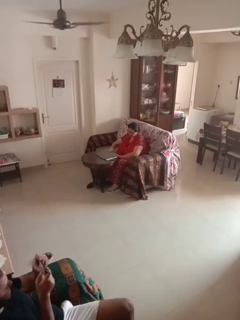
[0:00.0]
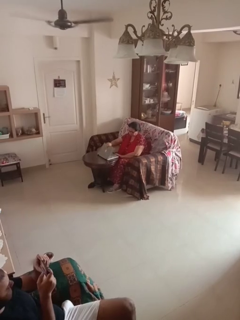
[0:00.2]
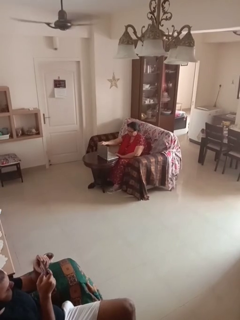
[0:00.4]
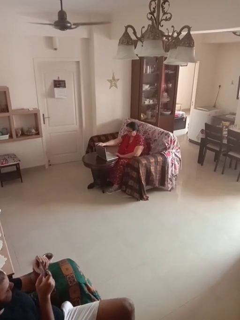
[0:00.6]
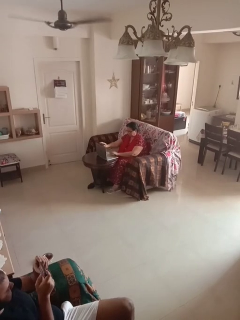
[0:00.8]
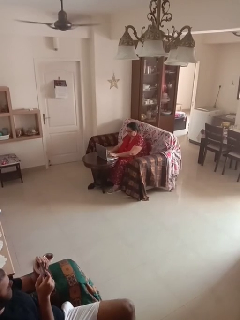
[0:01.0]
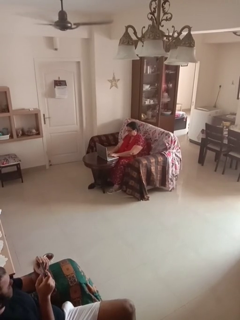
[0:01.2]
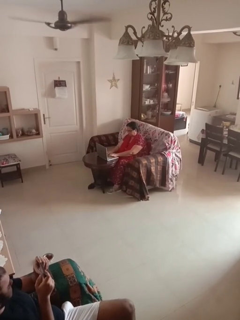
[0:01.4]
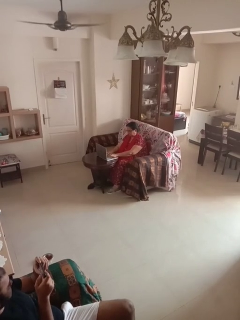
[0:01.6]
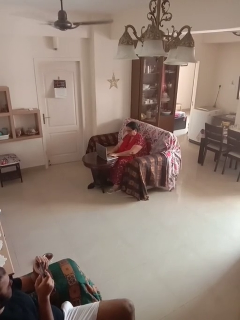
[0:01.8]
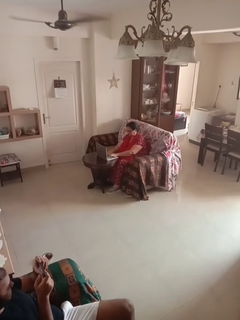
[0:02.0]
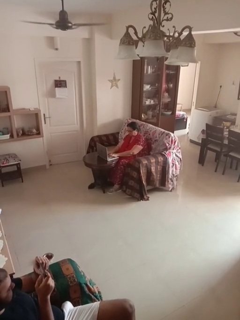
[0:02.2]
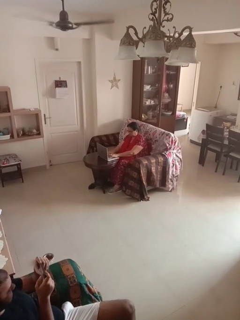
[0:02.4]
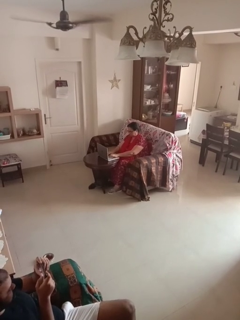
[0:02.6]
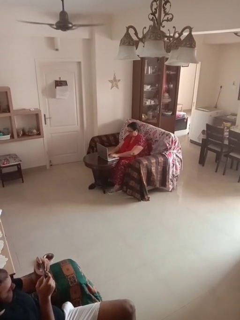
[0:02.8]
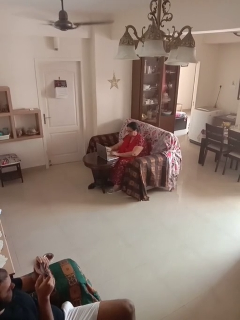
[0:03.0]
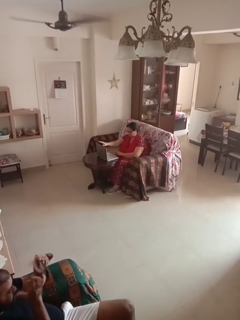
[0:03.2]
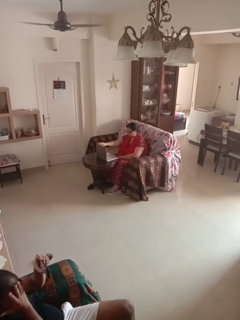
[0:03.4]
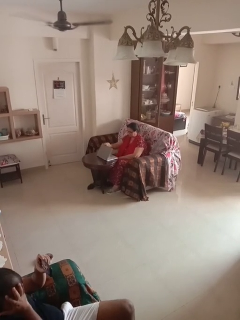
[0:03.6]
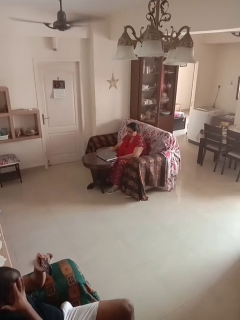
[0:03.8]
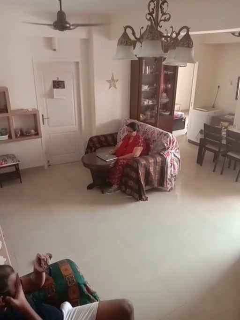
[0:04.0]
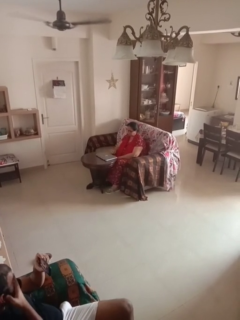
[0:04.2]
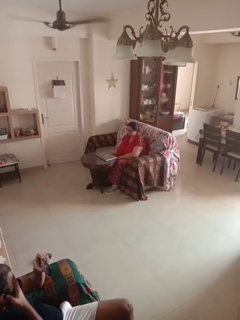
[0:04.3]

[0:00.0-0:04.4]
person interacts with laptop

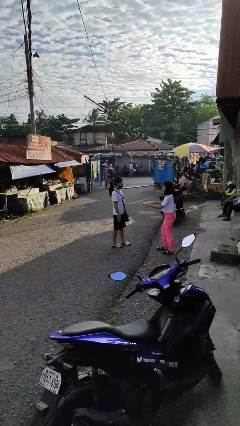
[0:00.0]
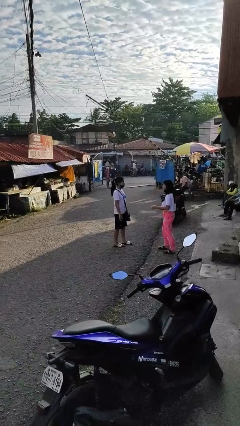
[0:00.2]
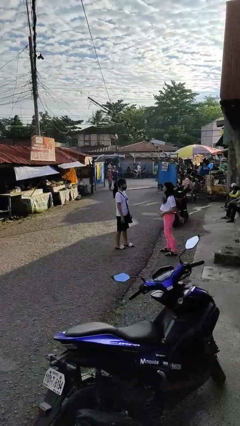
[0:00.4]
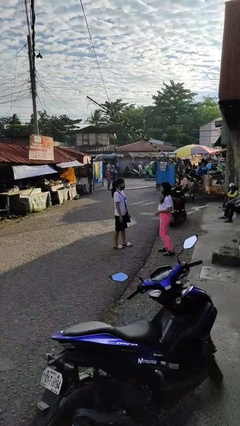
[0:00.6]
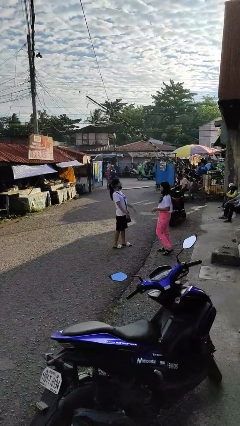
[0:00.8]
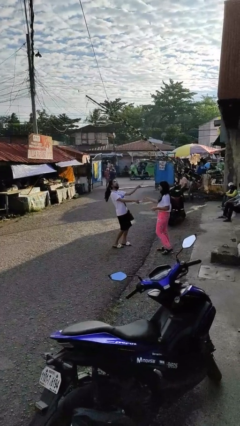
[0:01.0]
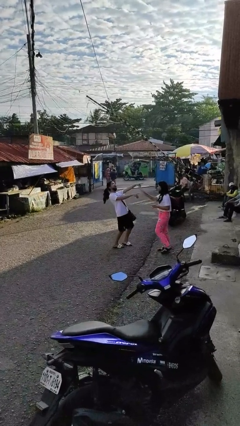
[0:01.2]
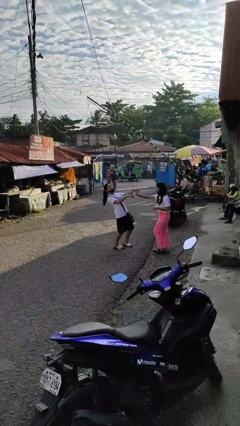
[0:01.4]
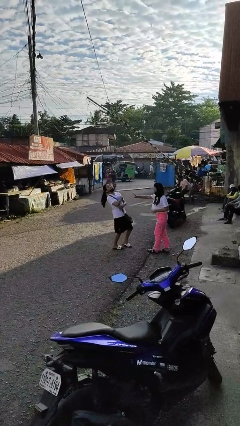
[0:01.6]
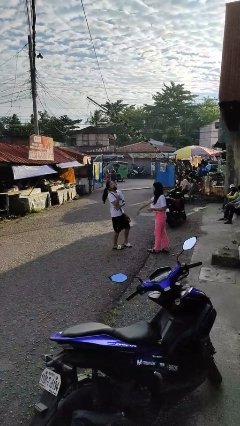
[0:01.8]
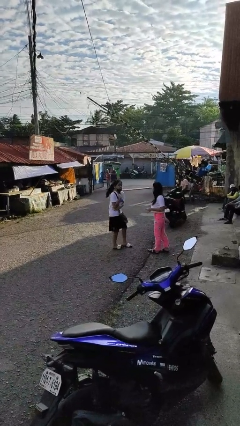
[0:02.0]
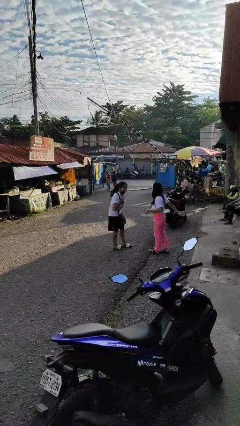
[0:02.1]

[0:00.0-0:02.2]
person laughs with person

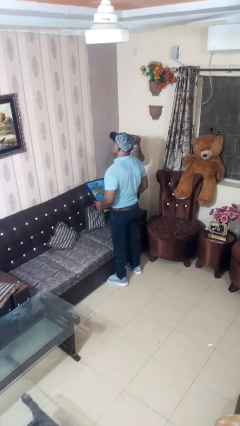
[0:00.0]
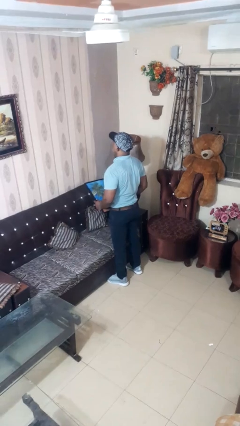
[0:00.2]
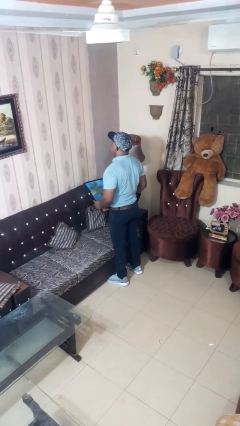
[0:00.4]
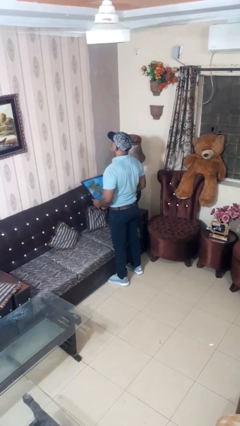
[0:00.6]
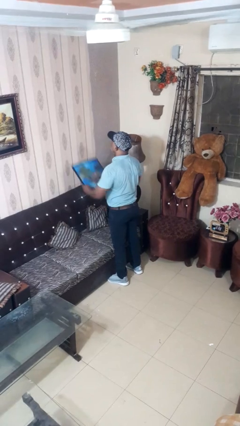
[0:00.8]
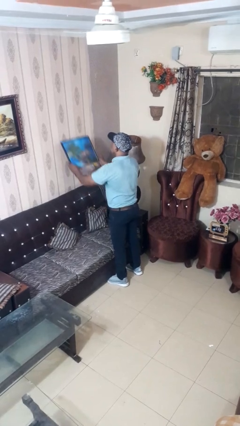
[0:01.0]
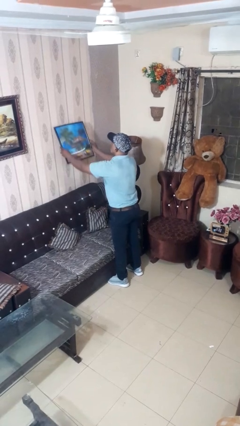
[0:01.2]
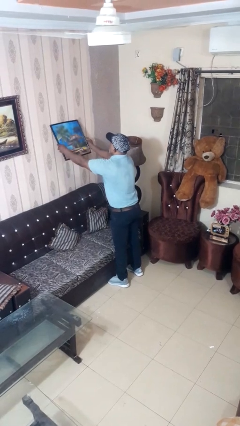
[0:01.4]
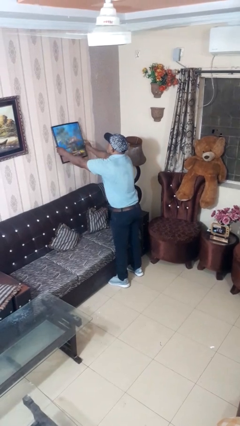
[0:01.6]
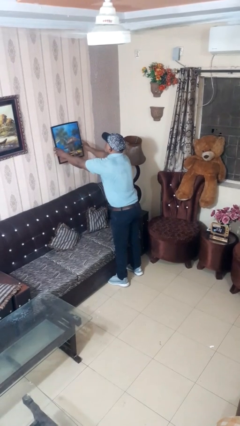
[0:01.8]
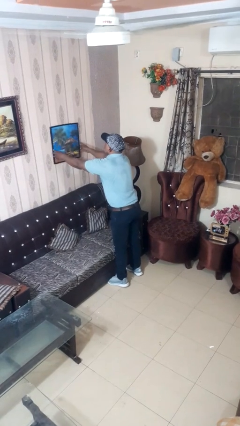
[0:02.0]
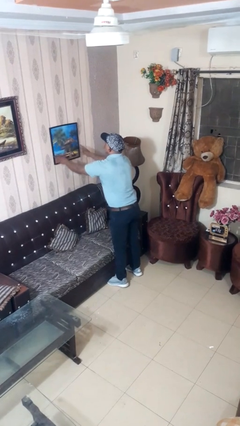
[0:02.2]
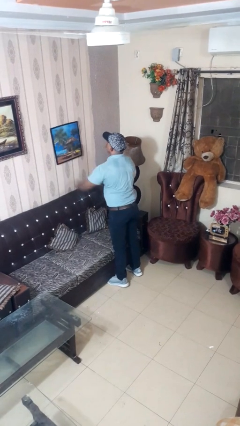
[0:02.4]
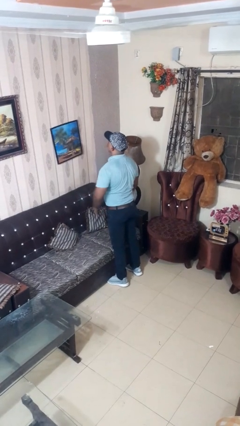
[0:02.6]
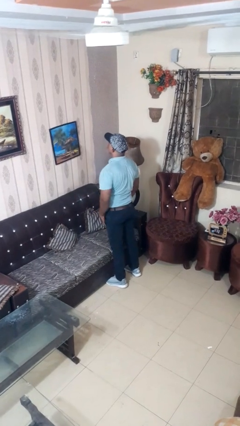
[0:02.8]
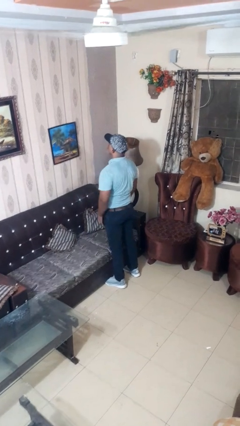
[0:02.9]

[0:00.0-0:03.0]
person puts up picture frame

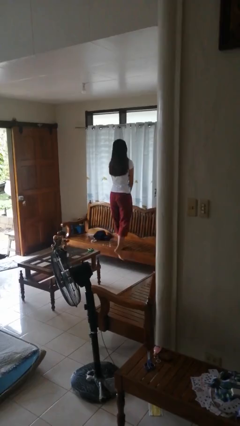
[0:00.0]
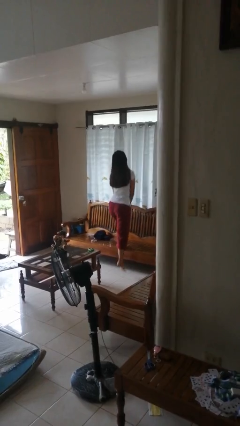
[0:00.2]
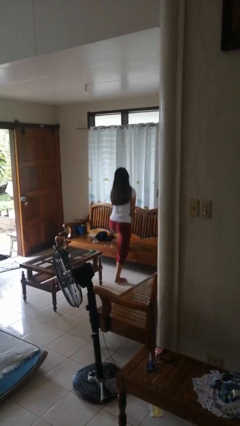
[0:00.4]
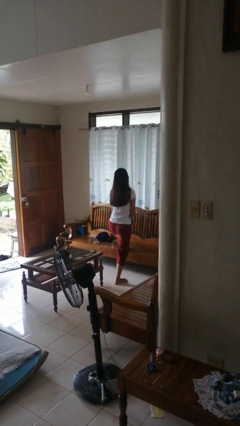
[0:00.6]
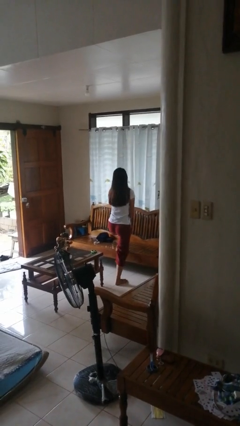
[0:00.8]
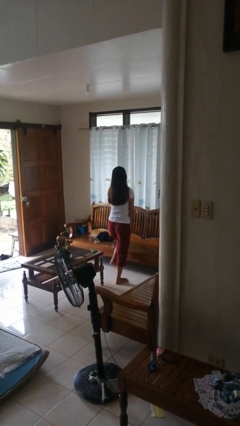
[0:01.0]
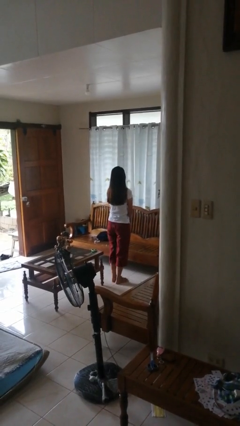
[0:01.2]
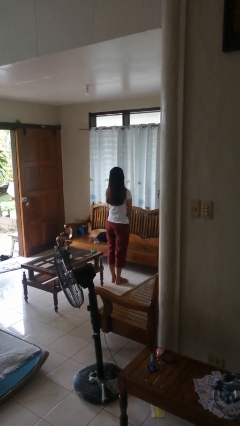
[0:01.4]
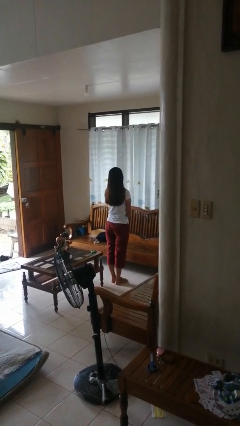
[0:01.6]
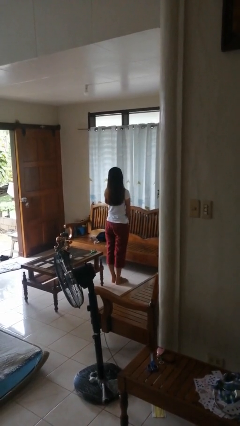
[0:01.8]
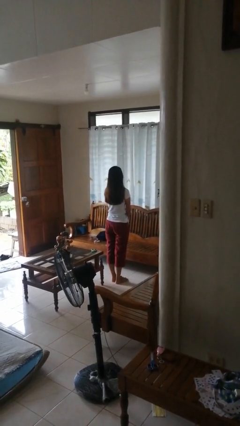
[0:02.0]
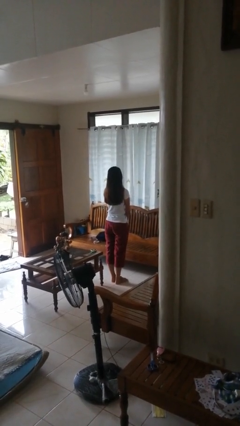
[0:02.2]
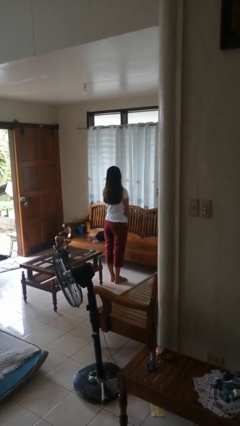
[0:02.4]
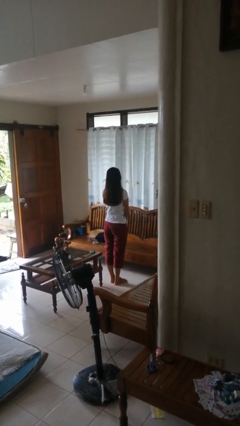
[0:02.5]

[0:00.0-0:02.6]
person climbs off chair

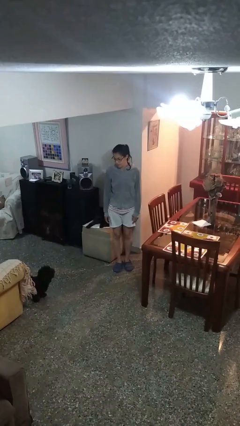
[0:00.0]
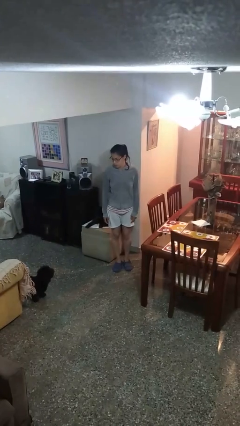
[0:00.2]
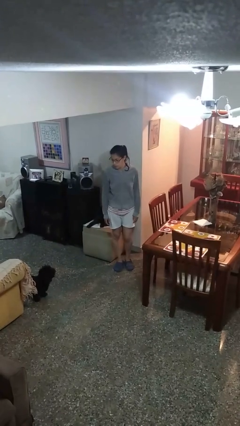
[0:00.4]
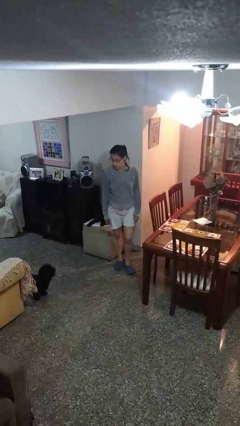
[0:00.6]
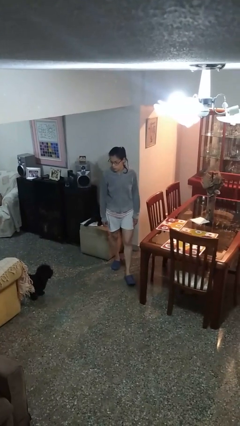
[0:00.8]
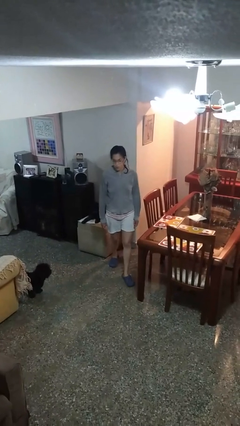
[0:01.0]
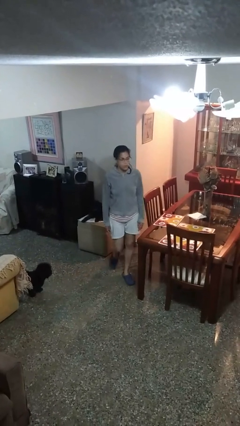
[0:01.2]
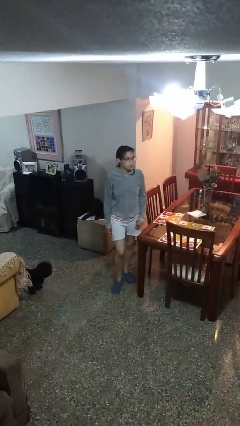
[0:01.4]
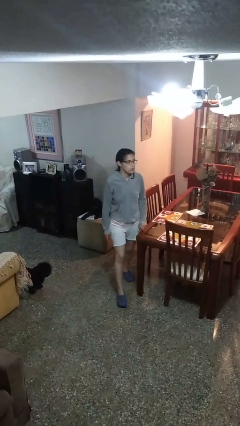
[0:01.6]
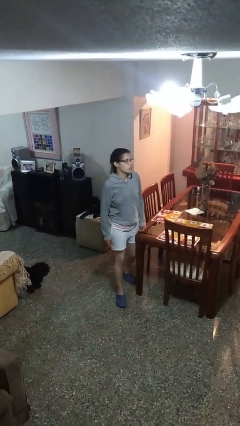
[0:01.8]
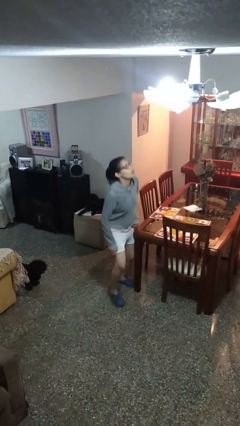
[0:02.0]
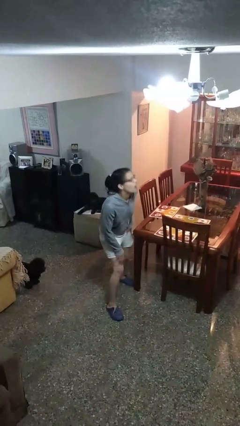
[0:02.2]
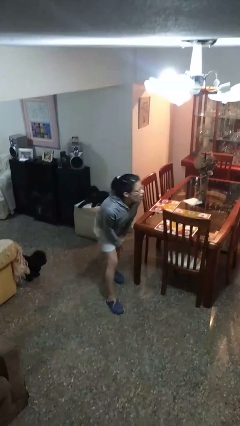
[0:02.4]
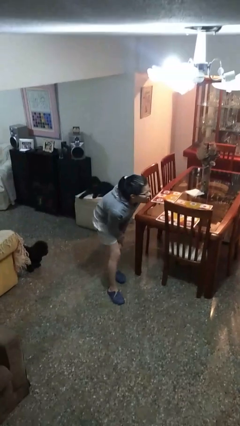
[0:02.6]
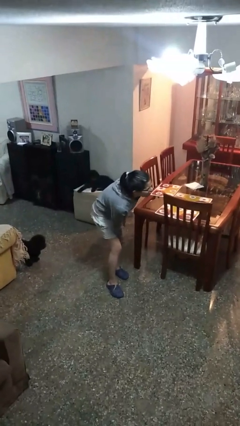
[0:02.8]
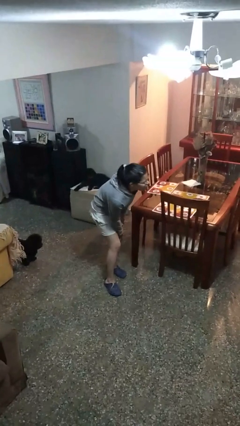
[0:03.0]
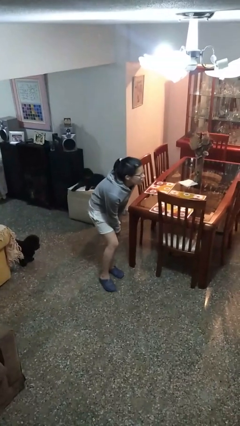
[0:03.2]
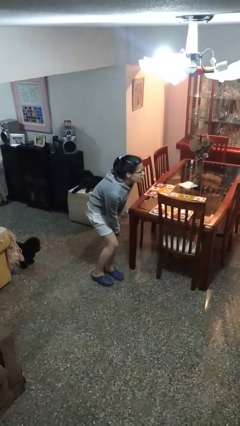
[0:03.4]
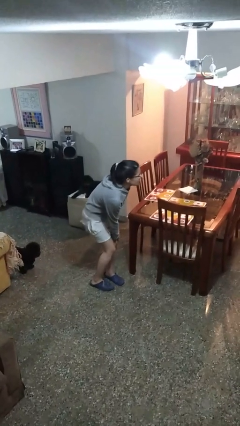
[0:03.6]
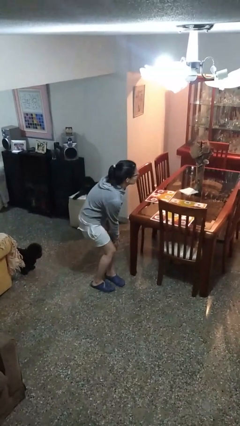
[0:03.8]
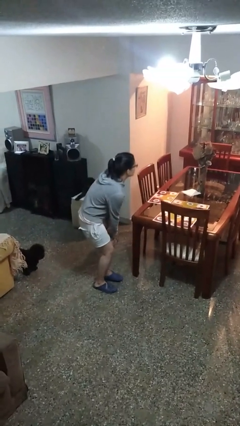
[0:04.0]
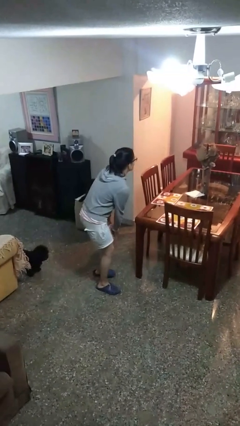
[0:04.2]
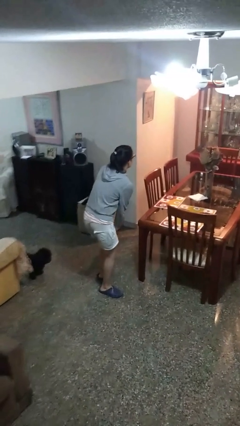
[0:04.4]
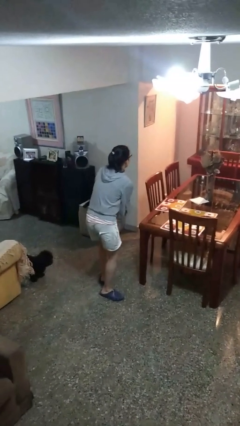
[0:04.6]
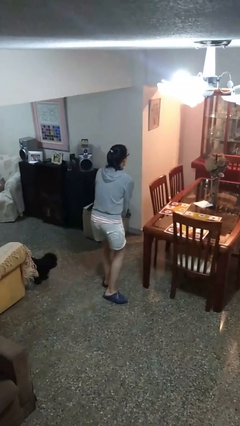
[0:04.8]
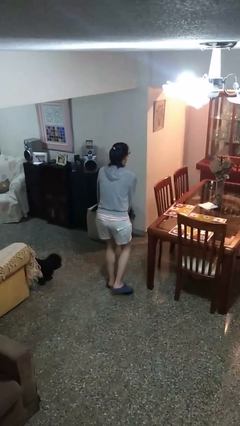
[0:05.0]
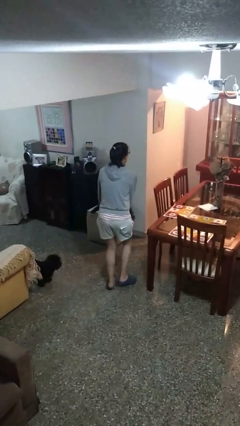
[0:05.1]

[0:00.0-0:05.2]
person bumps into table

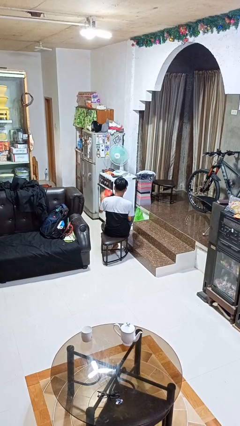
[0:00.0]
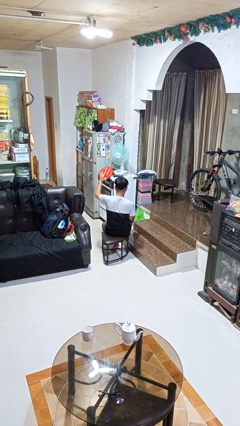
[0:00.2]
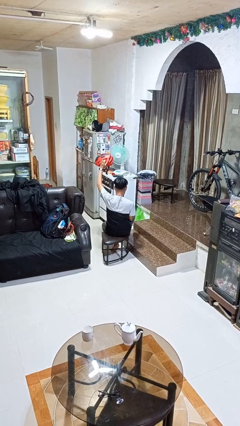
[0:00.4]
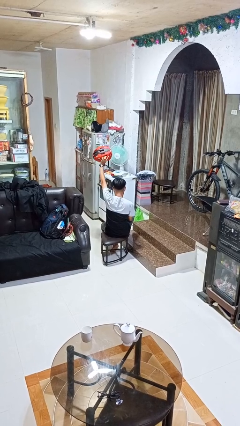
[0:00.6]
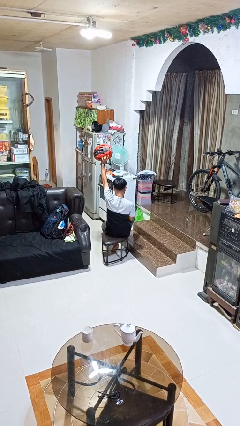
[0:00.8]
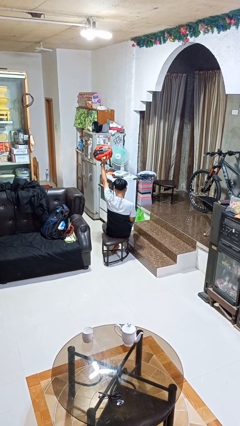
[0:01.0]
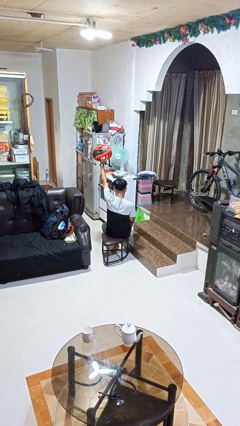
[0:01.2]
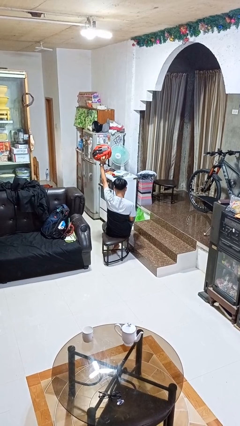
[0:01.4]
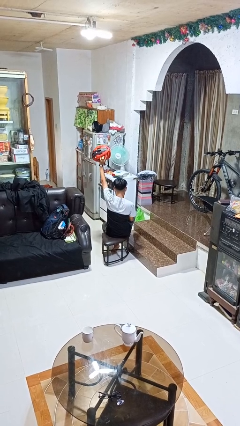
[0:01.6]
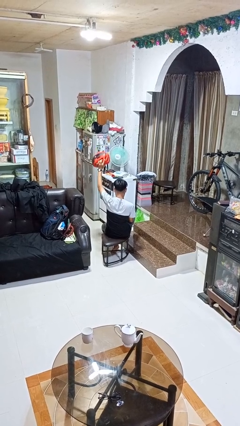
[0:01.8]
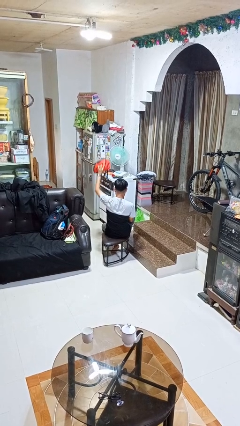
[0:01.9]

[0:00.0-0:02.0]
person holds object above head
